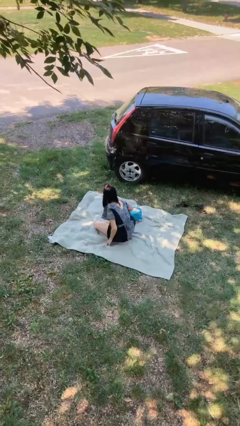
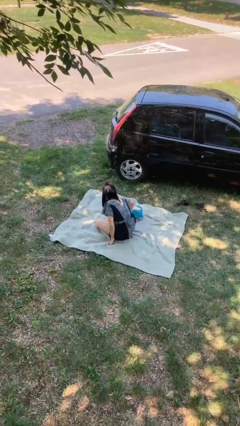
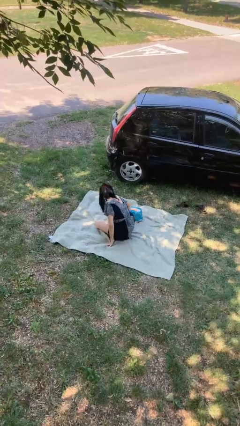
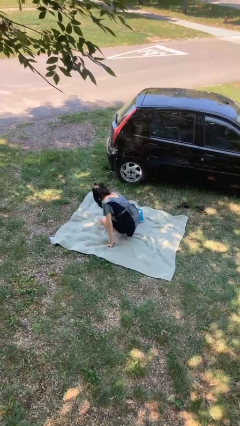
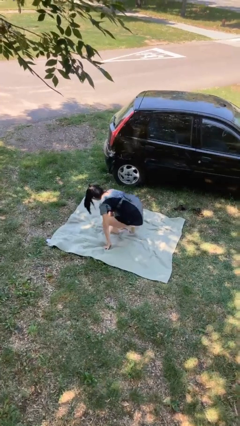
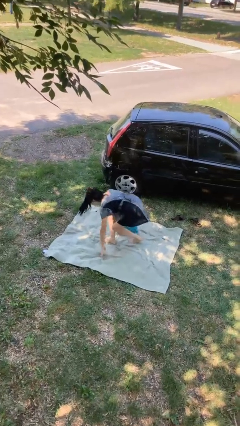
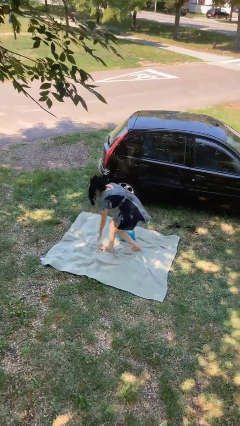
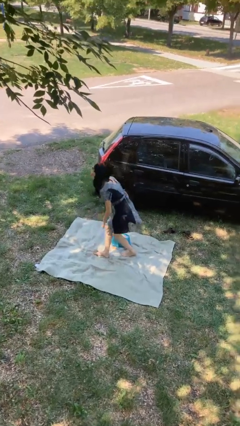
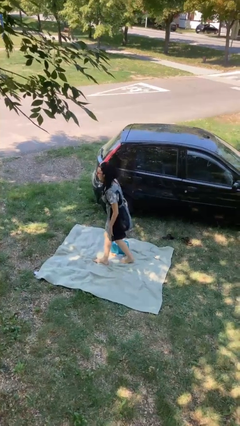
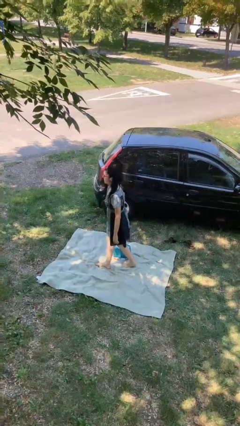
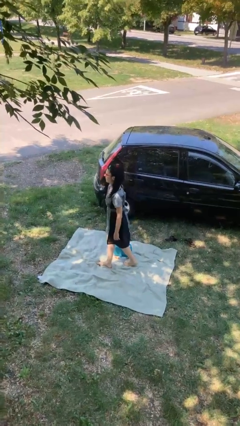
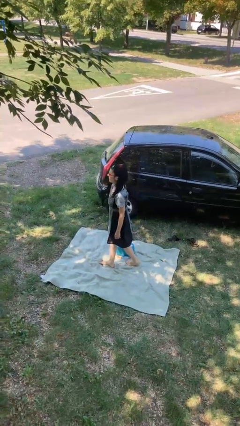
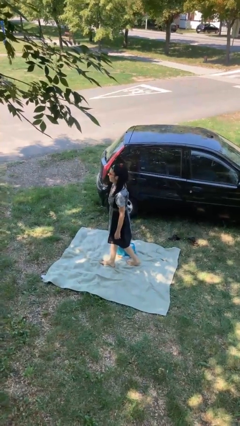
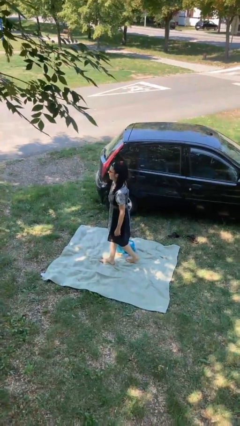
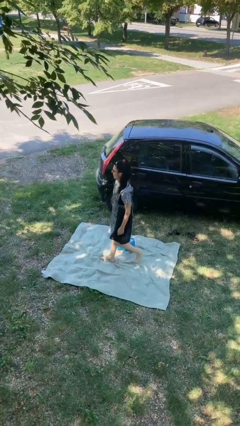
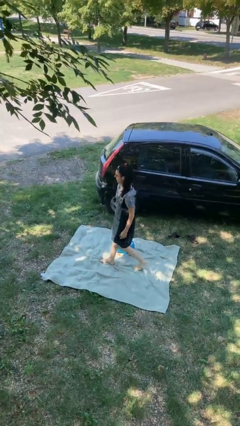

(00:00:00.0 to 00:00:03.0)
person stands up from floor

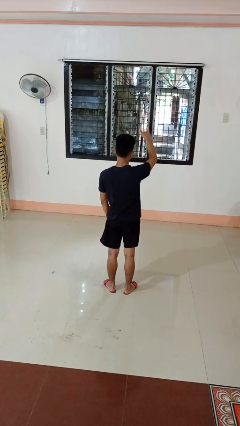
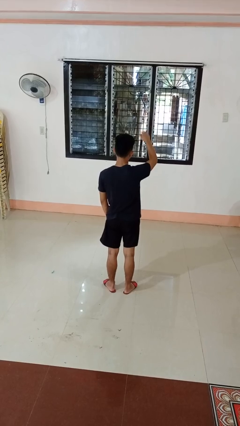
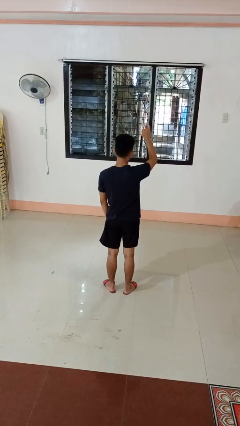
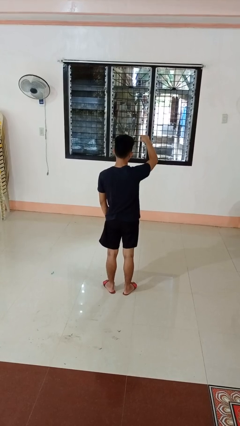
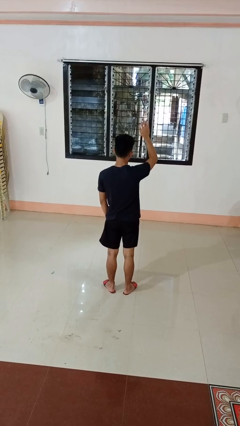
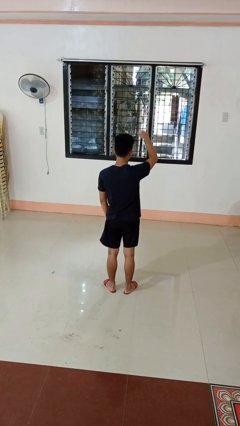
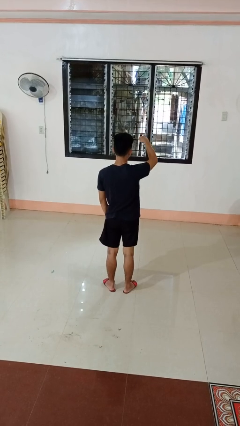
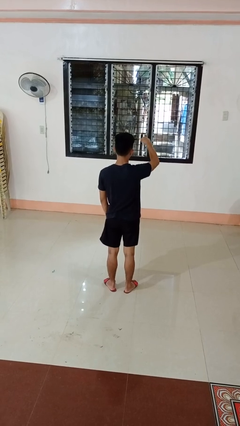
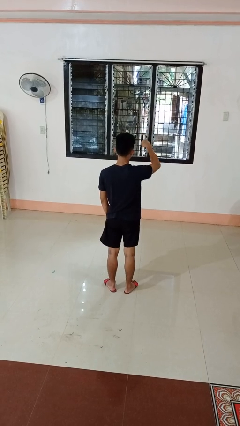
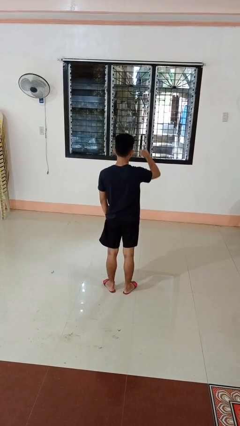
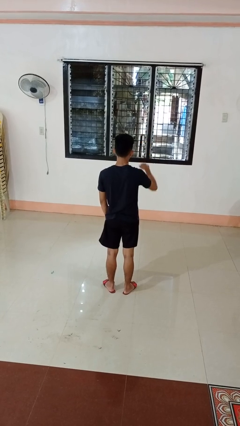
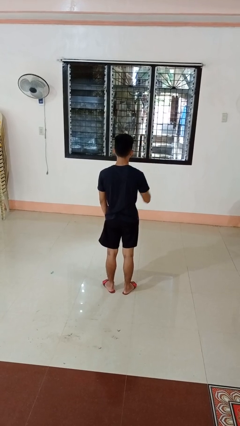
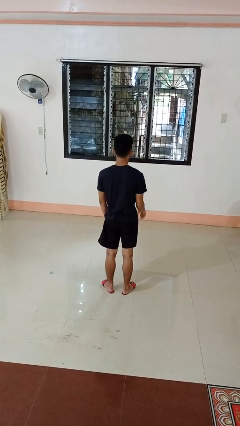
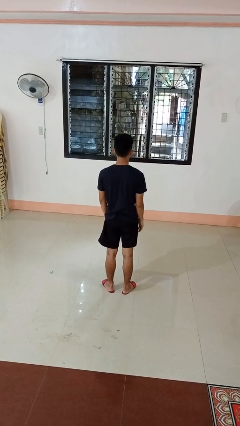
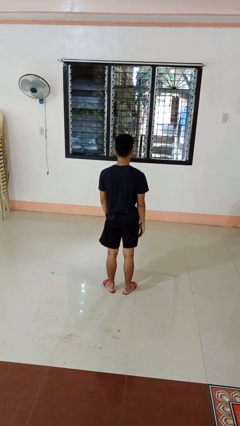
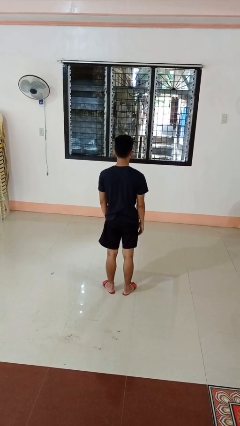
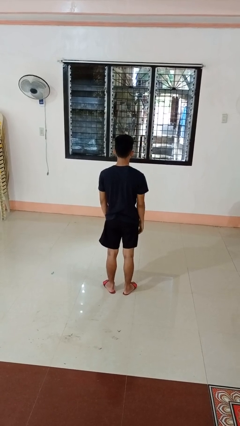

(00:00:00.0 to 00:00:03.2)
person gestures come here

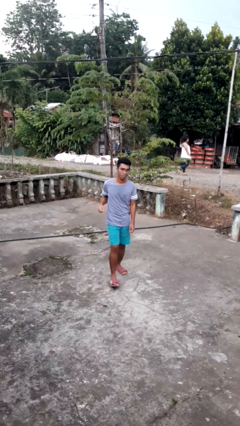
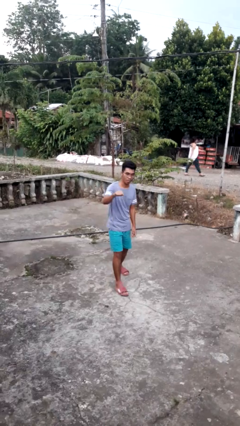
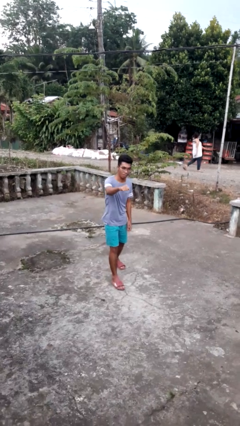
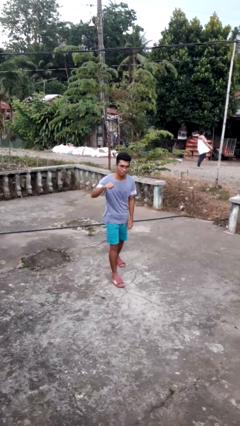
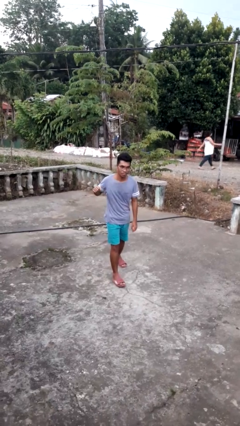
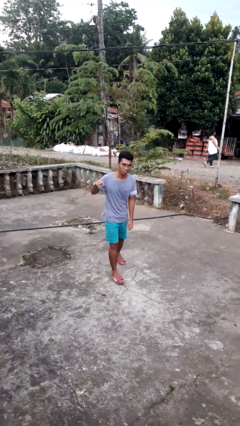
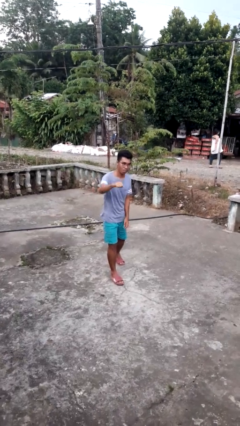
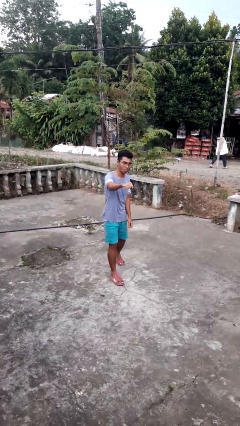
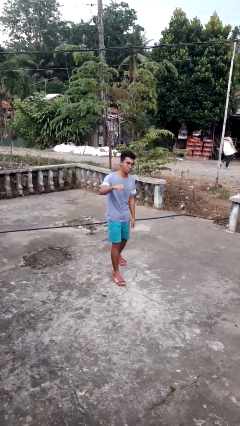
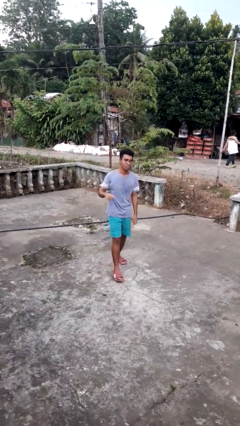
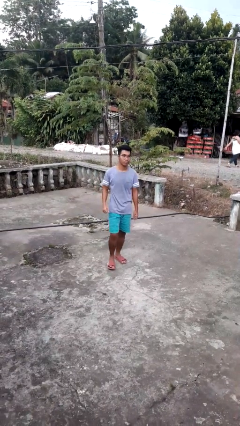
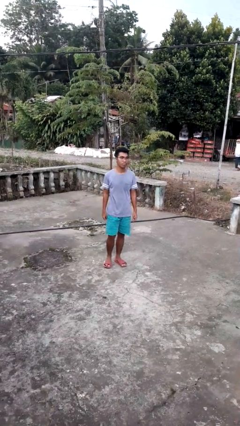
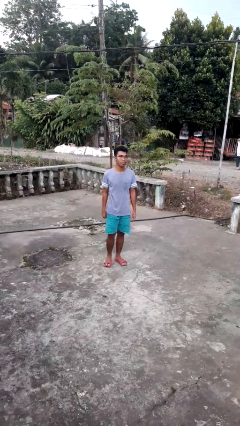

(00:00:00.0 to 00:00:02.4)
person punches

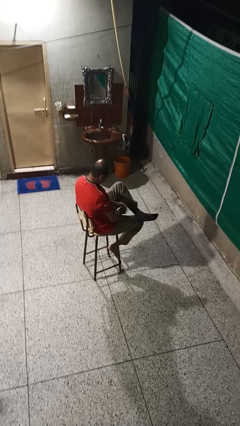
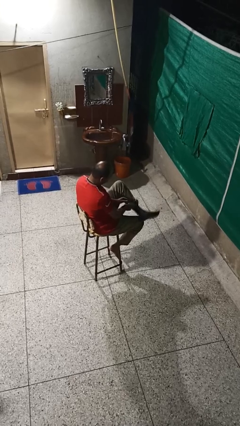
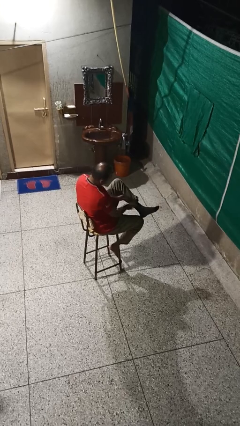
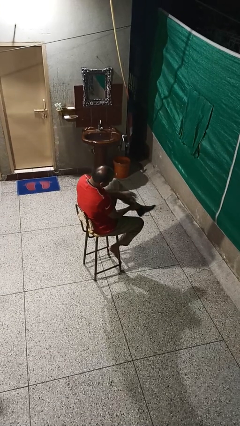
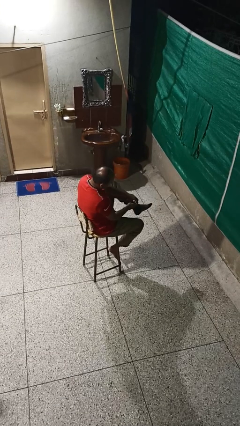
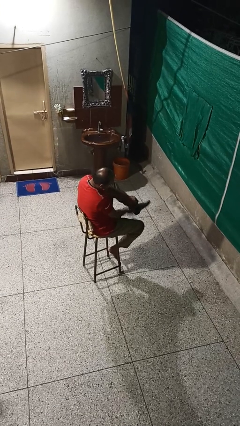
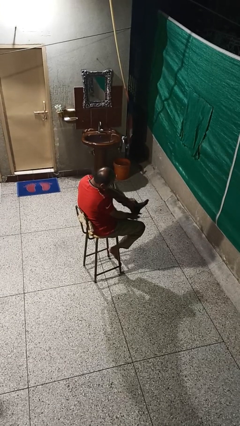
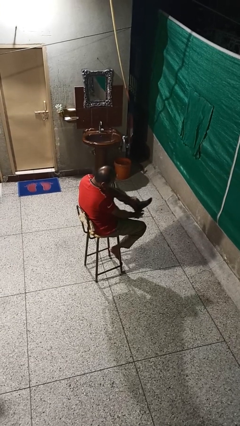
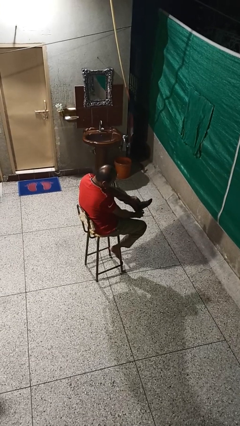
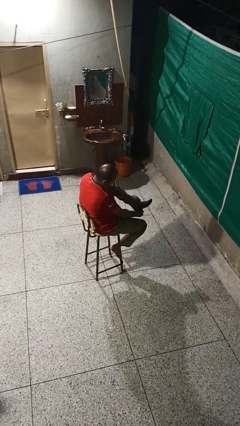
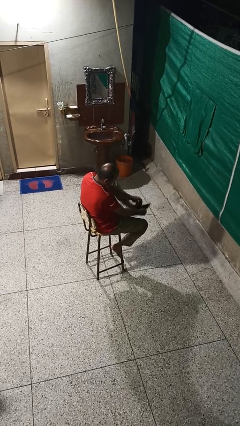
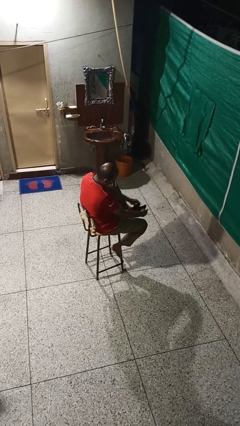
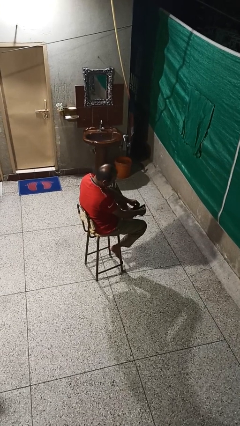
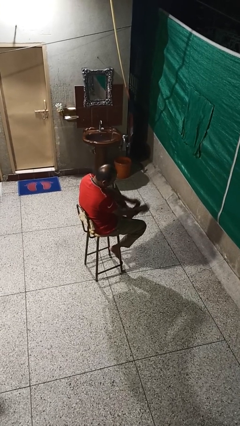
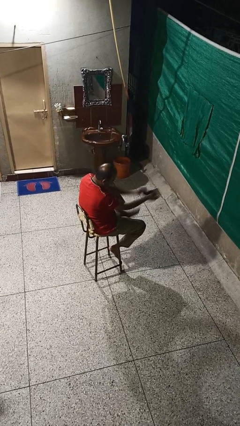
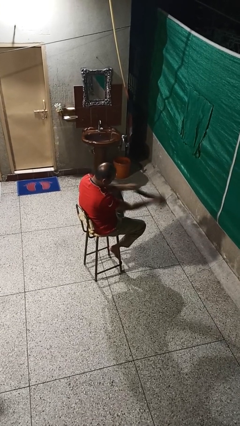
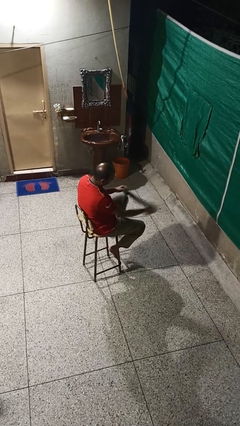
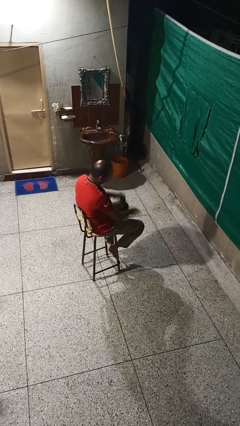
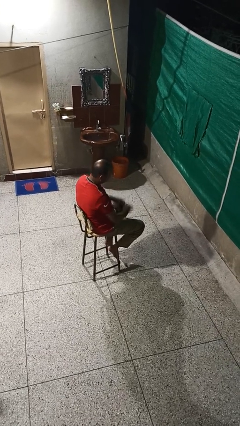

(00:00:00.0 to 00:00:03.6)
person takes off socks

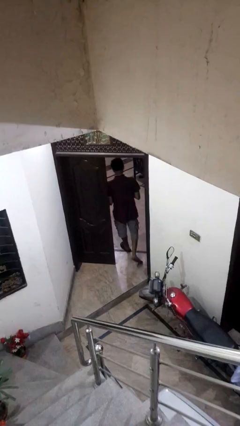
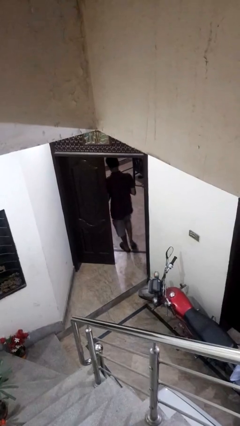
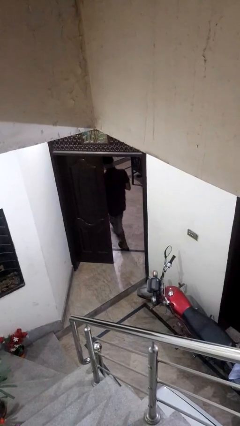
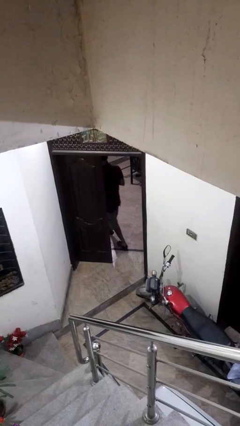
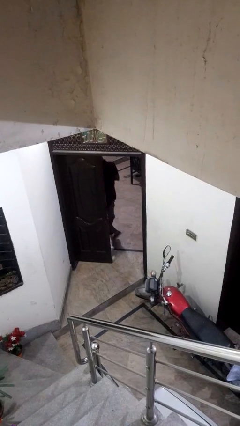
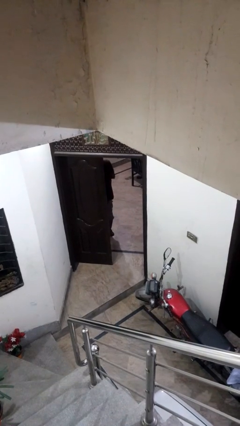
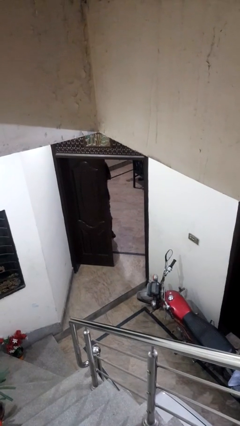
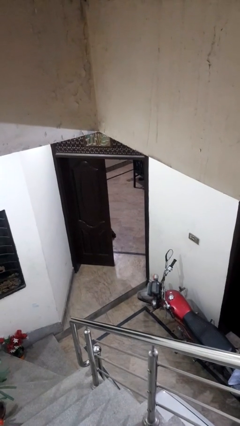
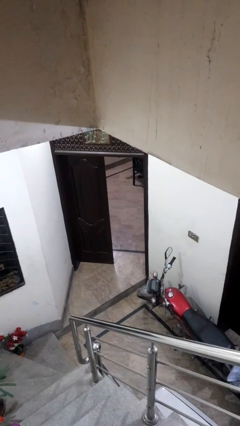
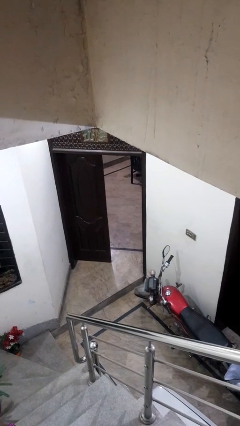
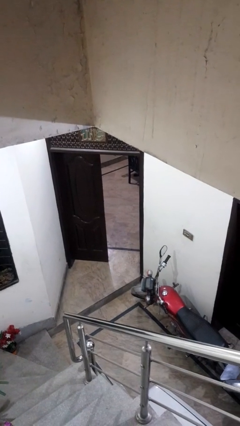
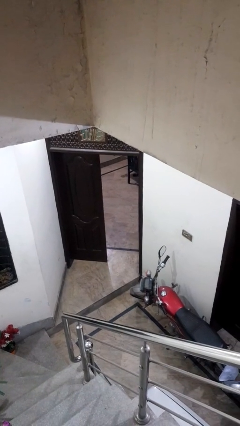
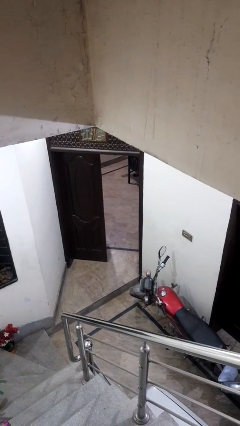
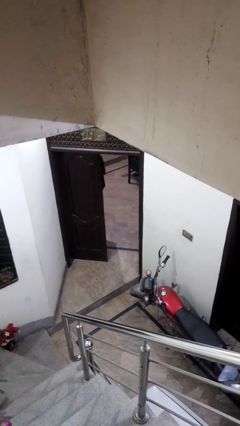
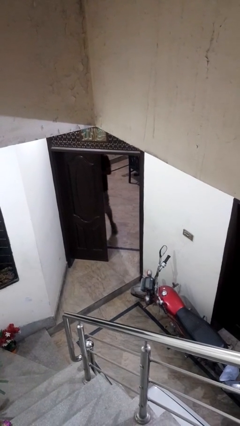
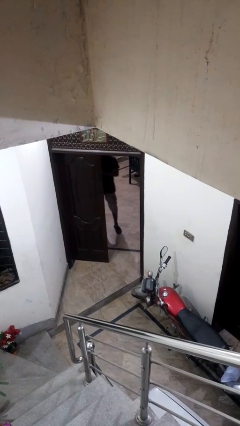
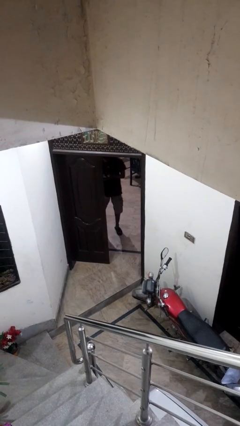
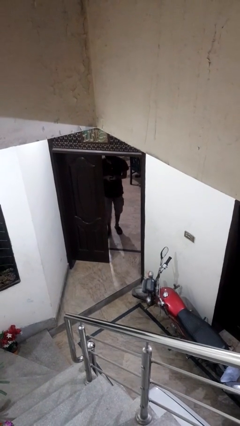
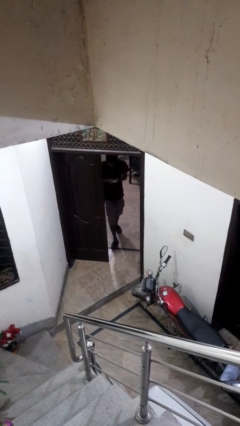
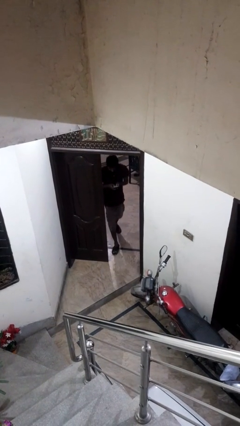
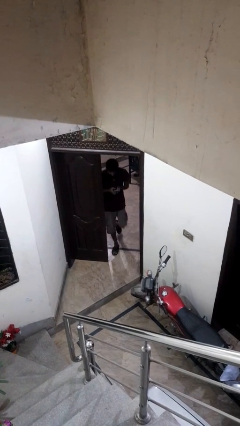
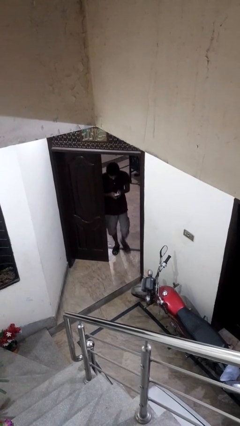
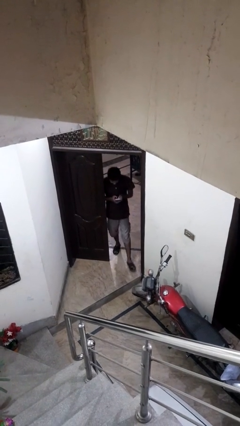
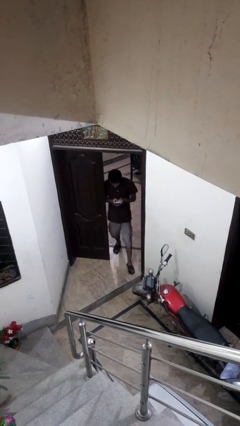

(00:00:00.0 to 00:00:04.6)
person exits scene through structure

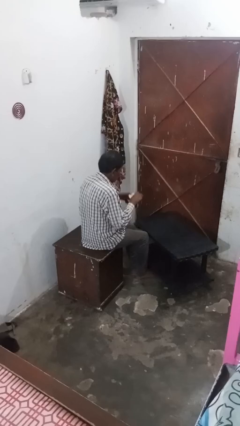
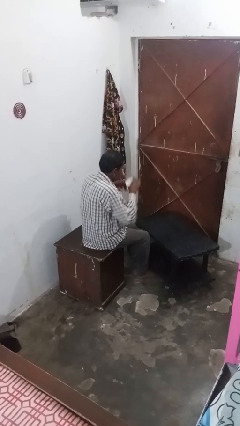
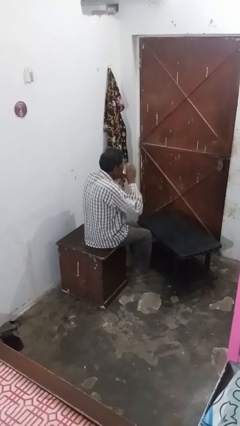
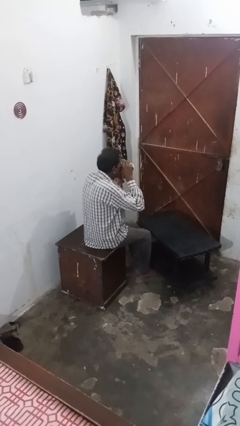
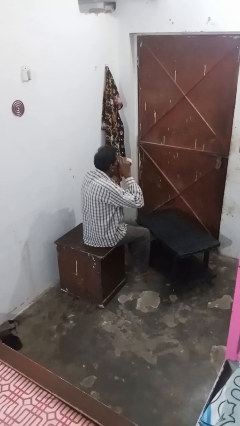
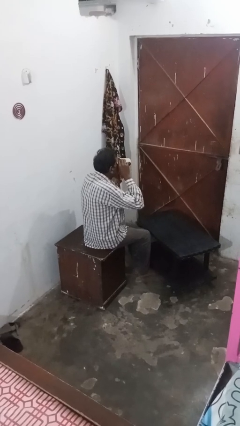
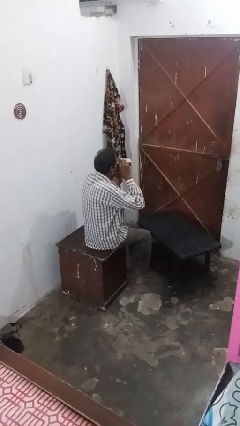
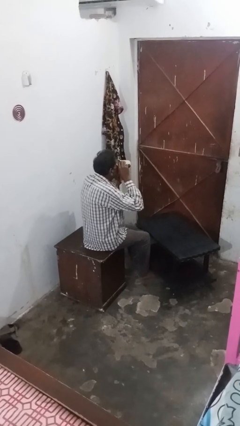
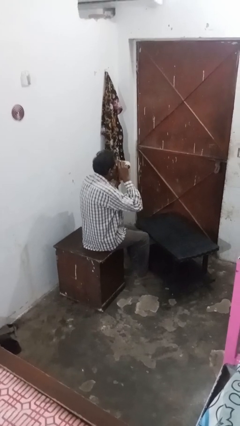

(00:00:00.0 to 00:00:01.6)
person drinks from mug
